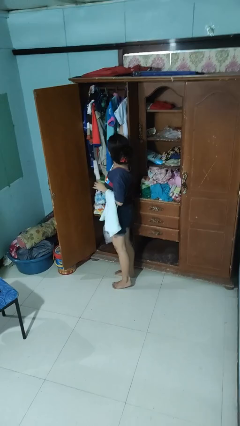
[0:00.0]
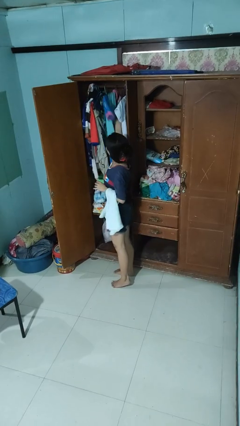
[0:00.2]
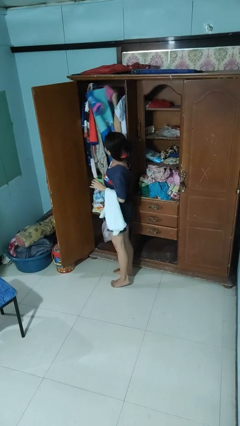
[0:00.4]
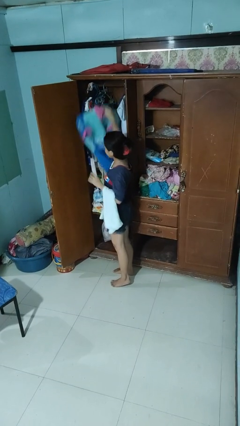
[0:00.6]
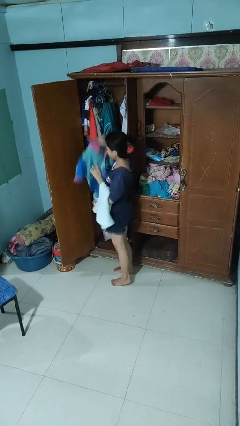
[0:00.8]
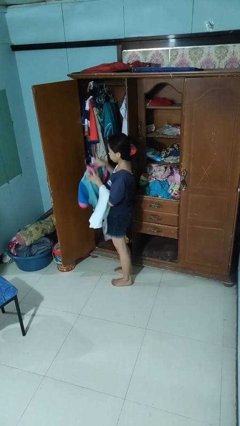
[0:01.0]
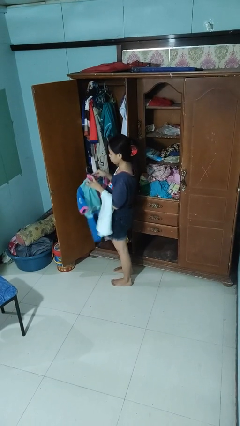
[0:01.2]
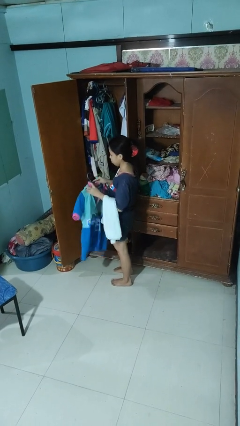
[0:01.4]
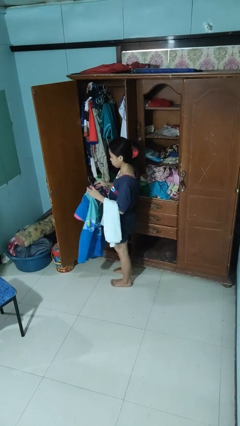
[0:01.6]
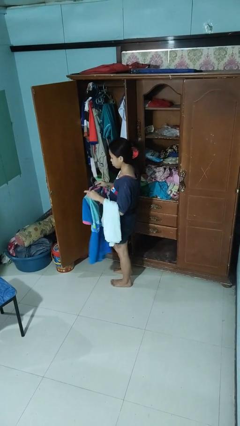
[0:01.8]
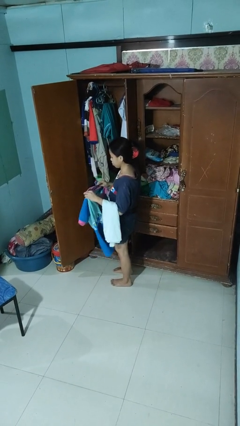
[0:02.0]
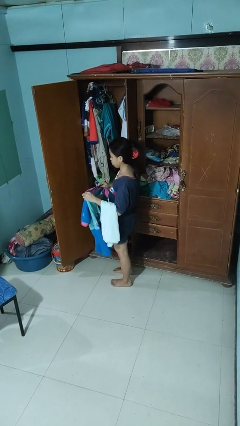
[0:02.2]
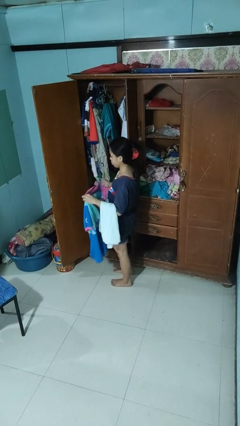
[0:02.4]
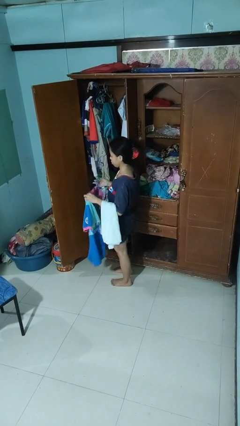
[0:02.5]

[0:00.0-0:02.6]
person takes clothes from closet

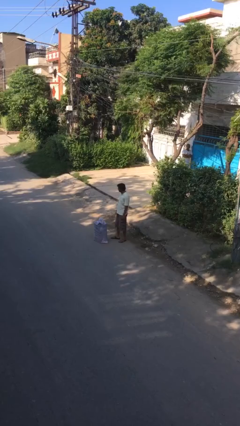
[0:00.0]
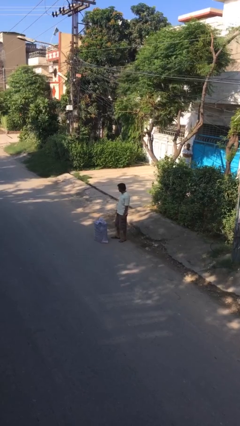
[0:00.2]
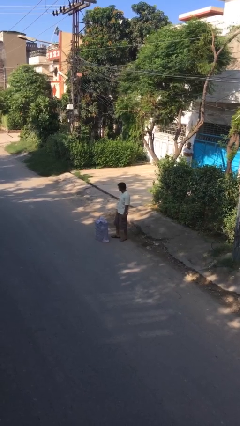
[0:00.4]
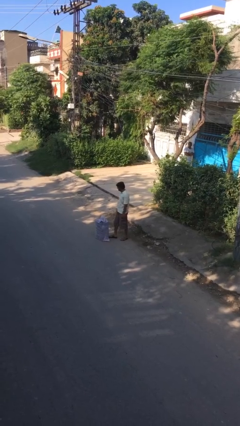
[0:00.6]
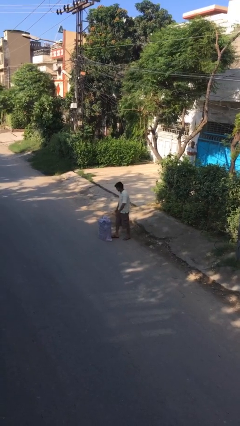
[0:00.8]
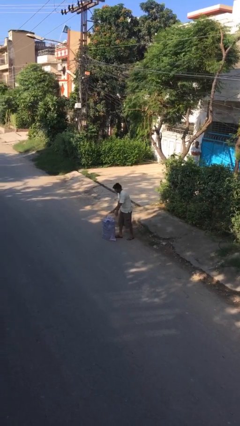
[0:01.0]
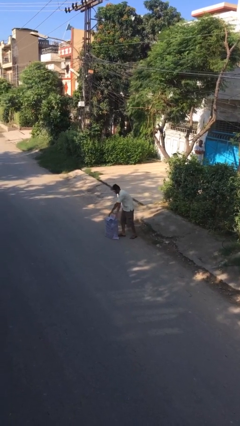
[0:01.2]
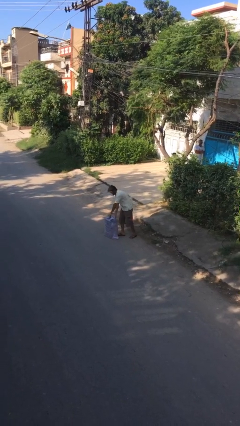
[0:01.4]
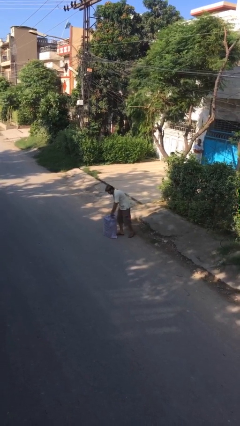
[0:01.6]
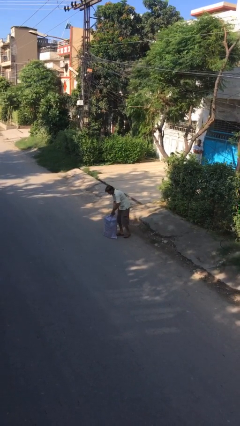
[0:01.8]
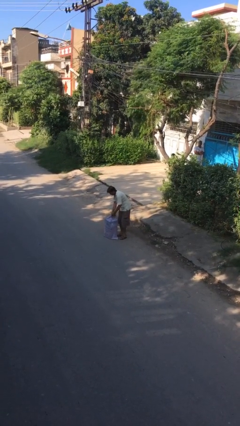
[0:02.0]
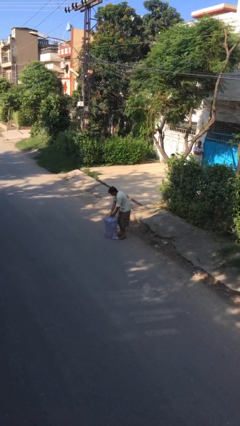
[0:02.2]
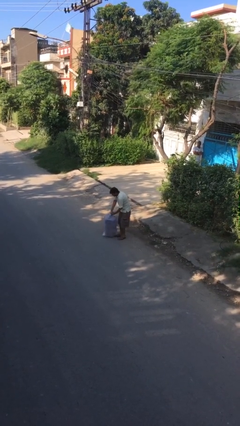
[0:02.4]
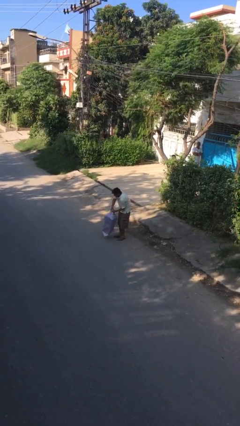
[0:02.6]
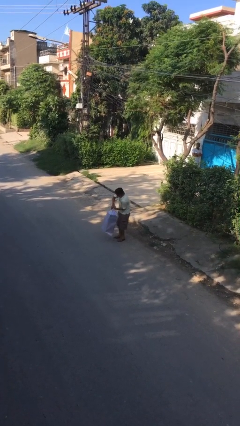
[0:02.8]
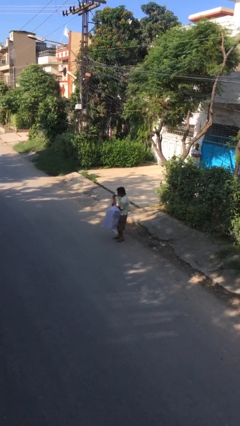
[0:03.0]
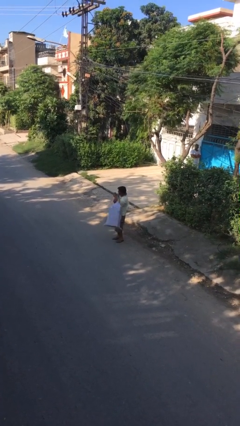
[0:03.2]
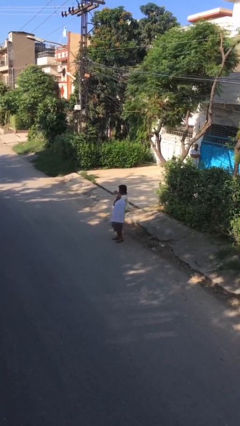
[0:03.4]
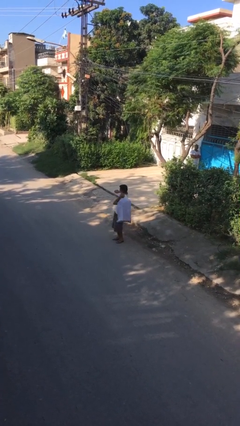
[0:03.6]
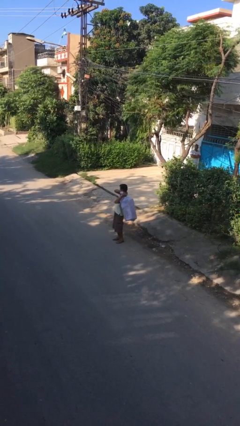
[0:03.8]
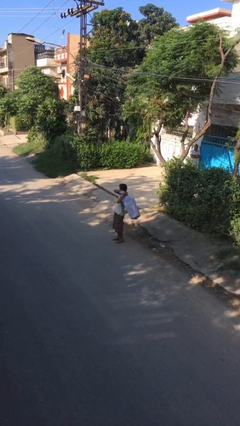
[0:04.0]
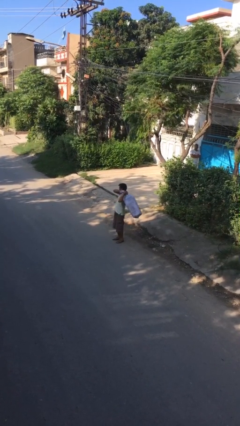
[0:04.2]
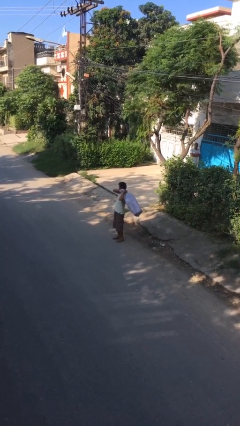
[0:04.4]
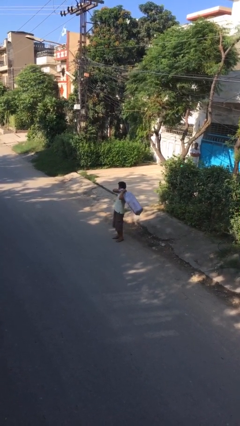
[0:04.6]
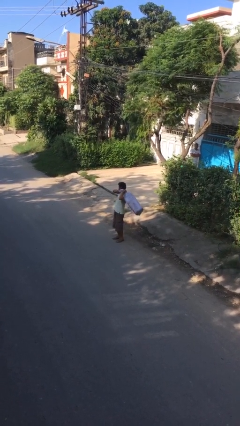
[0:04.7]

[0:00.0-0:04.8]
person picks up object from floor

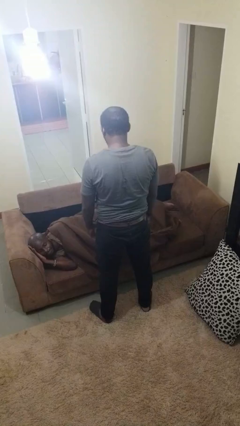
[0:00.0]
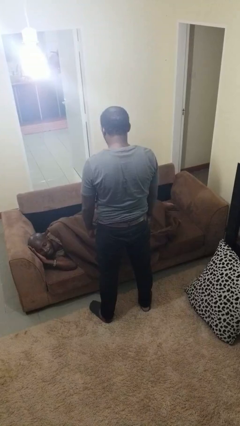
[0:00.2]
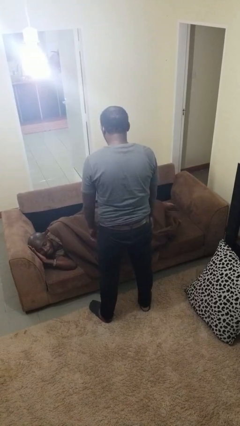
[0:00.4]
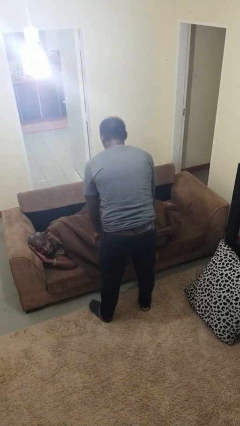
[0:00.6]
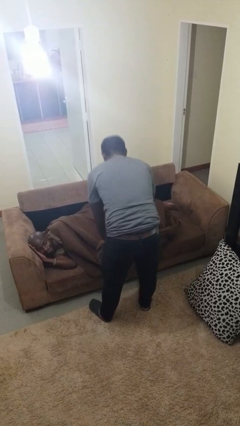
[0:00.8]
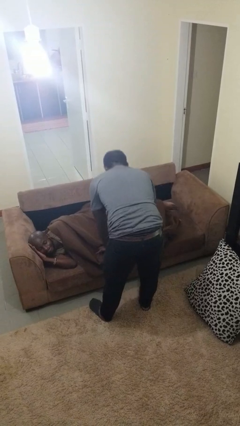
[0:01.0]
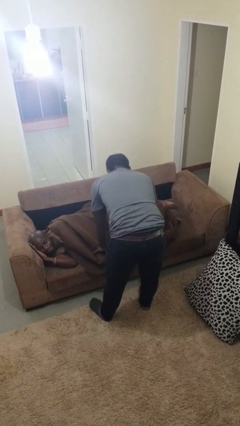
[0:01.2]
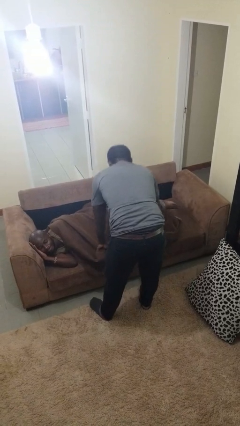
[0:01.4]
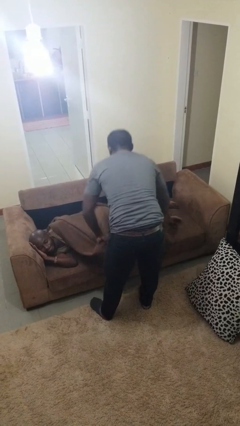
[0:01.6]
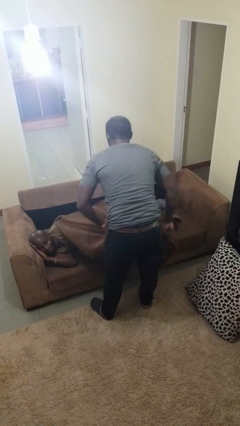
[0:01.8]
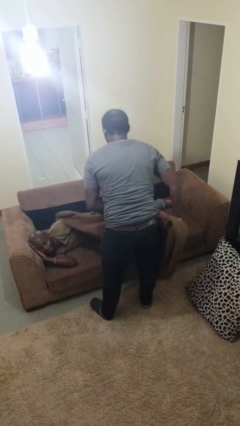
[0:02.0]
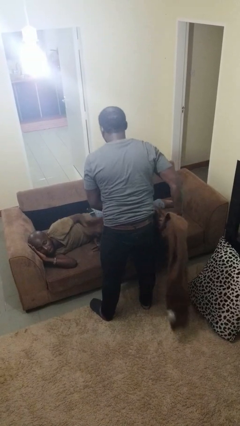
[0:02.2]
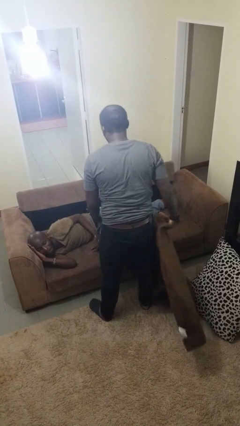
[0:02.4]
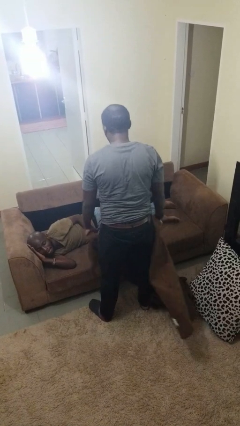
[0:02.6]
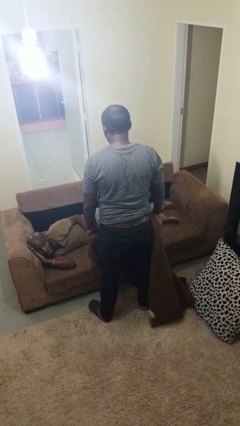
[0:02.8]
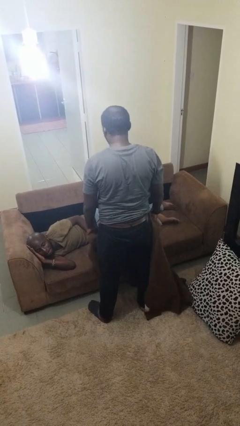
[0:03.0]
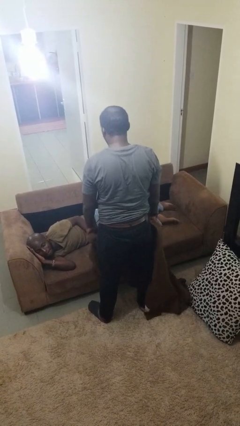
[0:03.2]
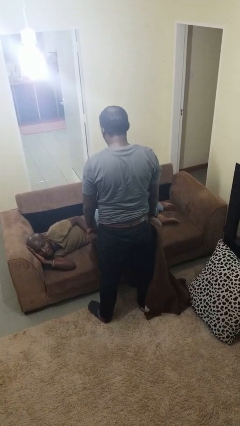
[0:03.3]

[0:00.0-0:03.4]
person uncovers friend with blanket

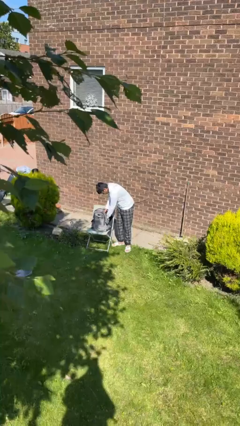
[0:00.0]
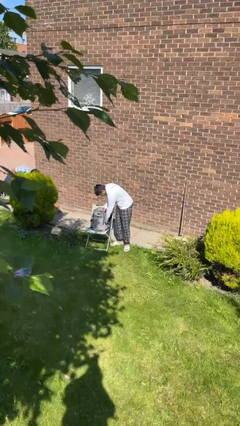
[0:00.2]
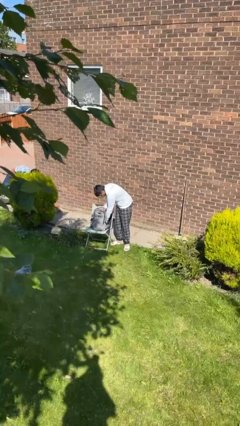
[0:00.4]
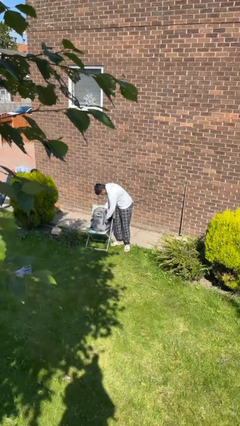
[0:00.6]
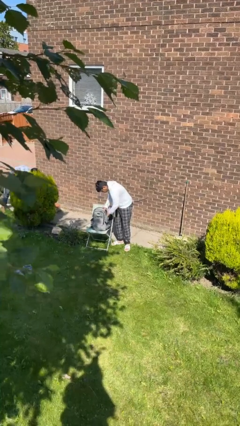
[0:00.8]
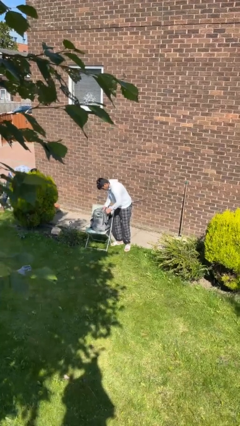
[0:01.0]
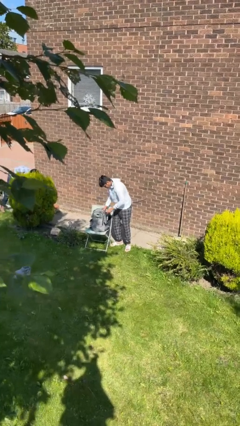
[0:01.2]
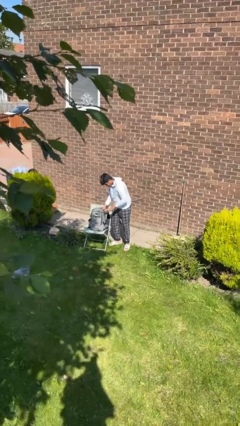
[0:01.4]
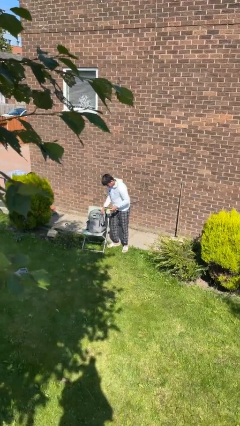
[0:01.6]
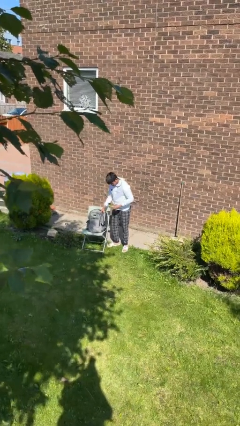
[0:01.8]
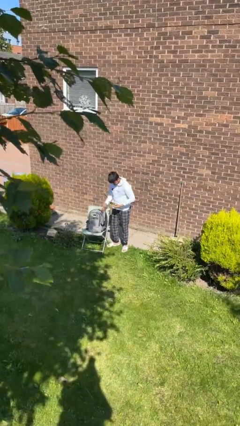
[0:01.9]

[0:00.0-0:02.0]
person takes object from backpack

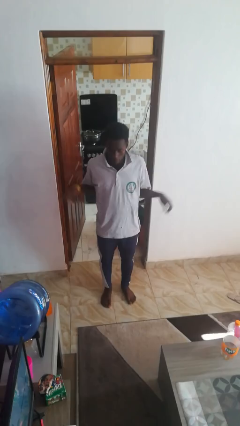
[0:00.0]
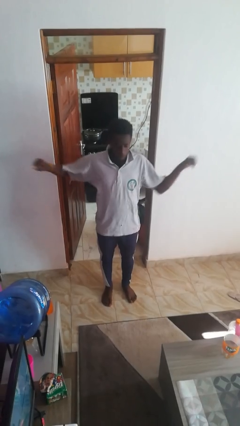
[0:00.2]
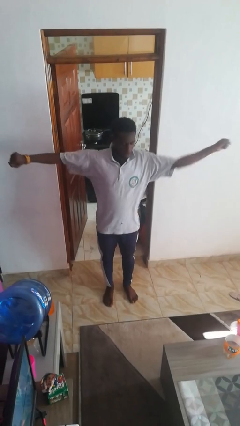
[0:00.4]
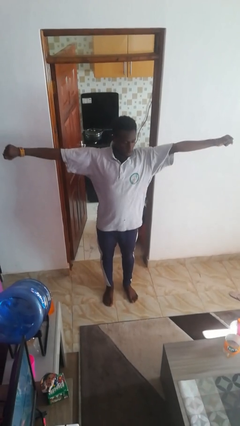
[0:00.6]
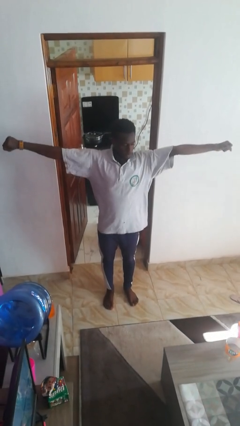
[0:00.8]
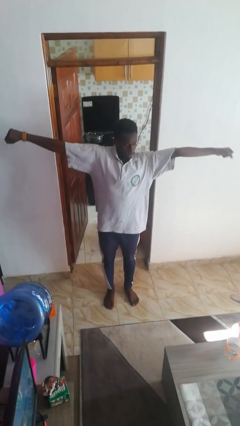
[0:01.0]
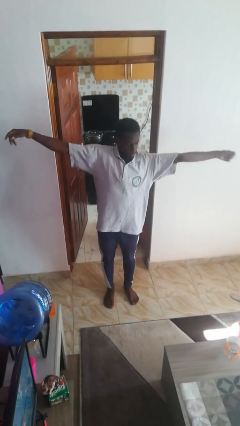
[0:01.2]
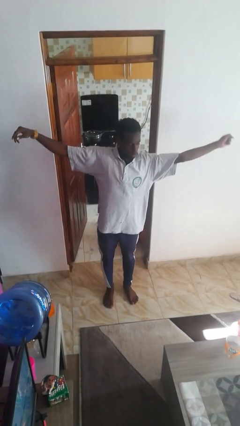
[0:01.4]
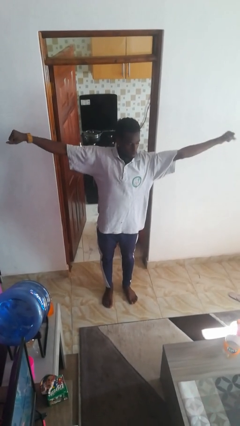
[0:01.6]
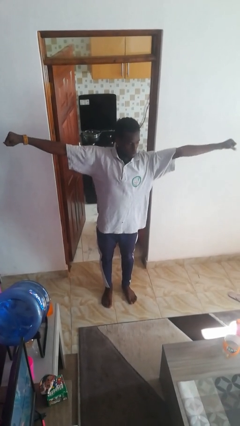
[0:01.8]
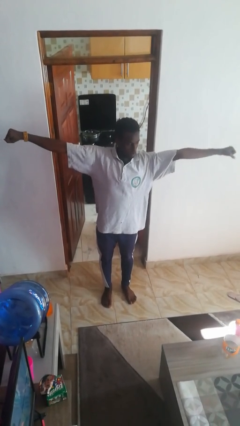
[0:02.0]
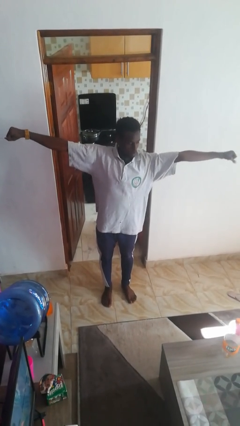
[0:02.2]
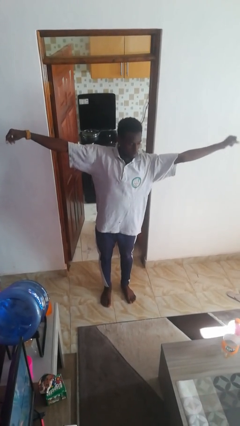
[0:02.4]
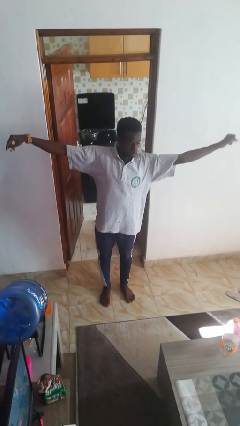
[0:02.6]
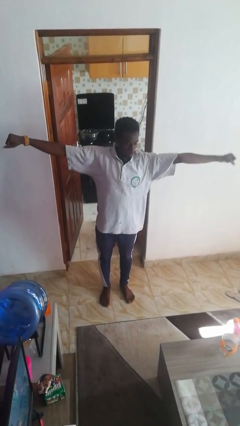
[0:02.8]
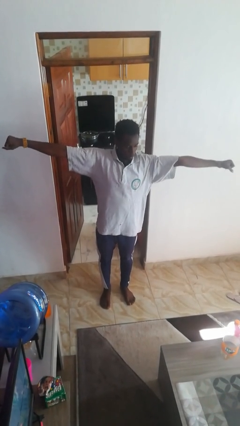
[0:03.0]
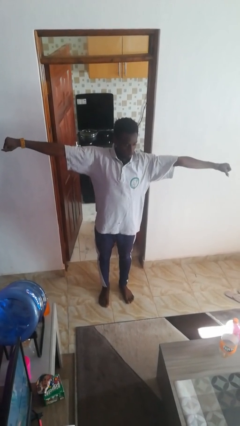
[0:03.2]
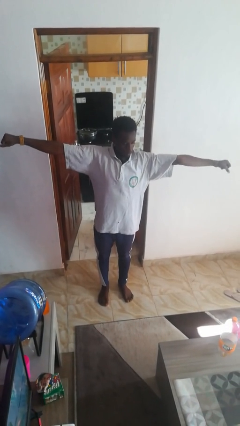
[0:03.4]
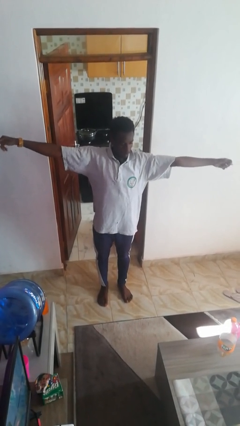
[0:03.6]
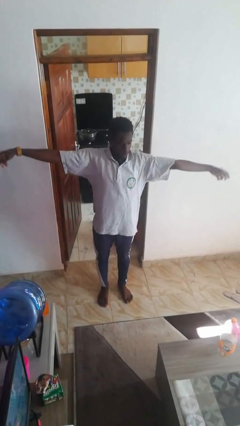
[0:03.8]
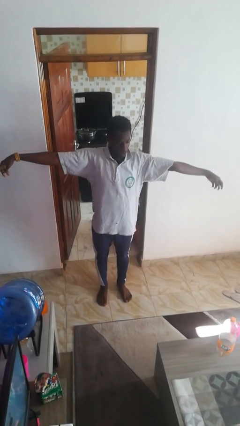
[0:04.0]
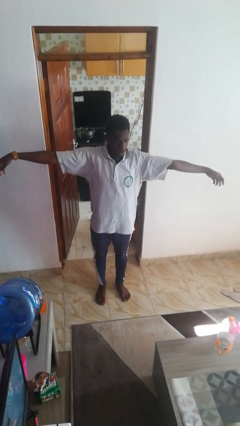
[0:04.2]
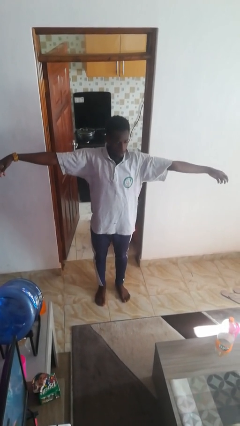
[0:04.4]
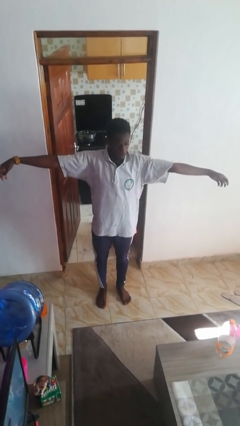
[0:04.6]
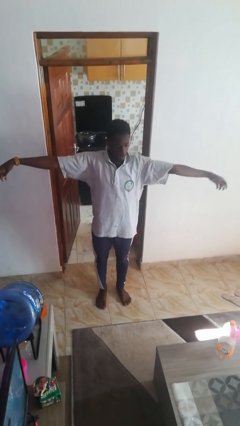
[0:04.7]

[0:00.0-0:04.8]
person stretches arms to side

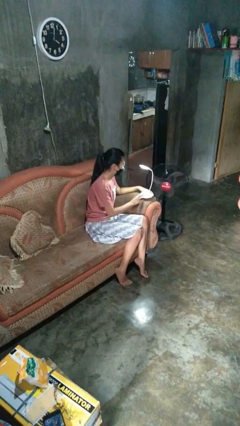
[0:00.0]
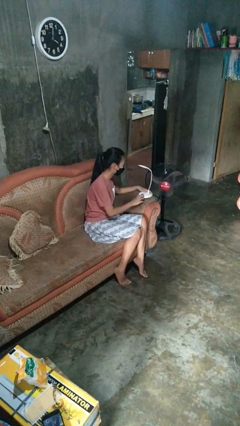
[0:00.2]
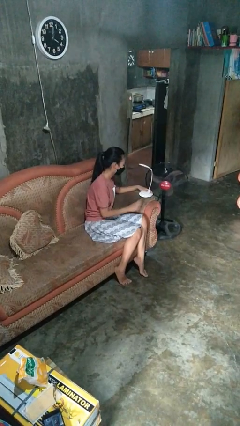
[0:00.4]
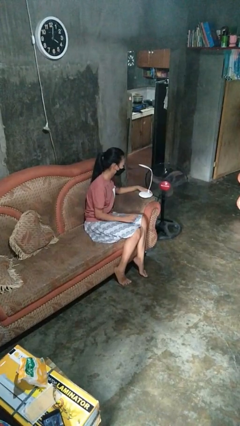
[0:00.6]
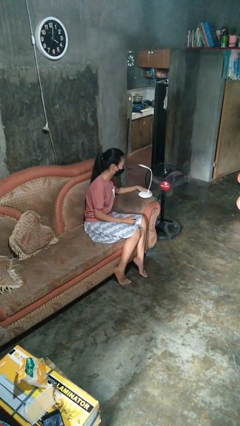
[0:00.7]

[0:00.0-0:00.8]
person turns off lamp
